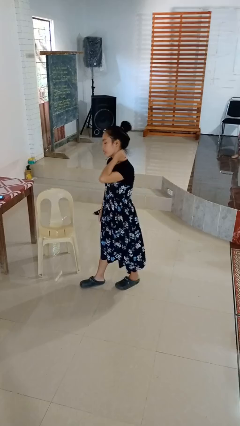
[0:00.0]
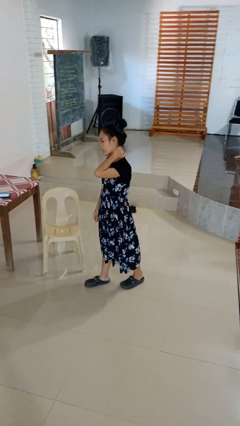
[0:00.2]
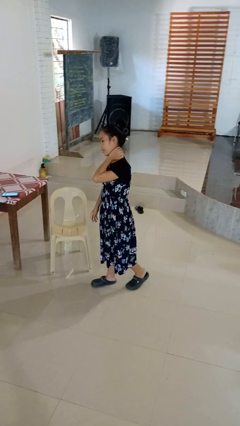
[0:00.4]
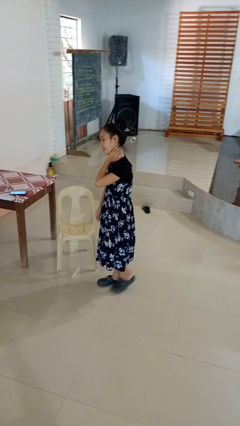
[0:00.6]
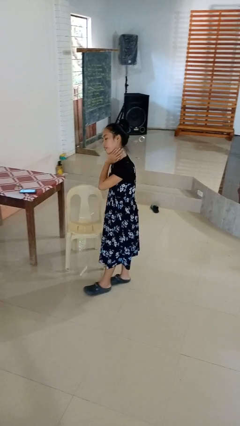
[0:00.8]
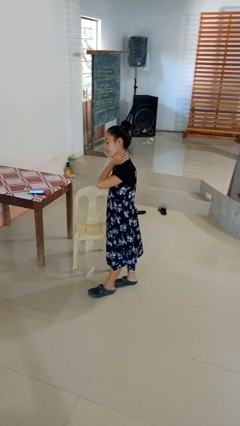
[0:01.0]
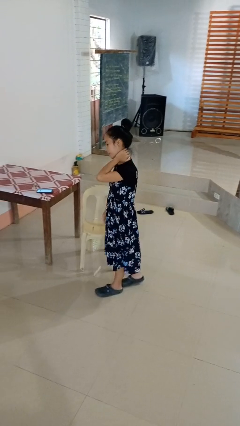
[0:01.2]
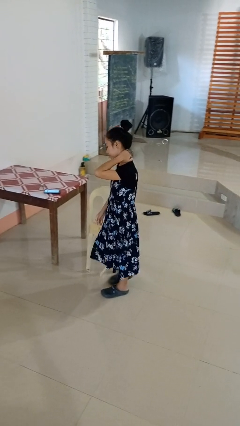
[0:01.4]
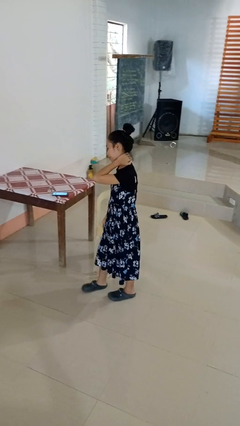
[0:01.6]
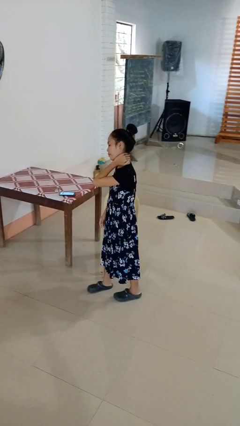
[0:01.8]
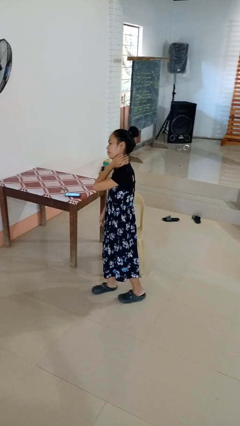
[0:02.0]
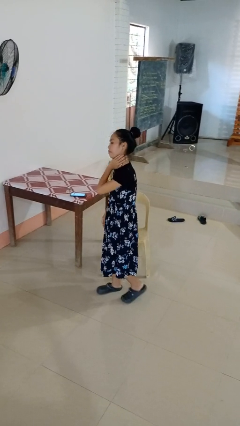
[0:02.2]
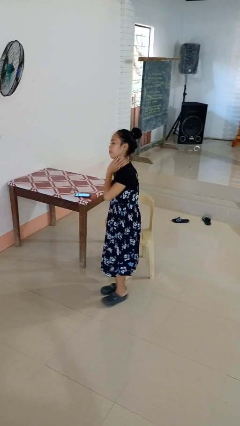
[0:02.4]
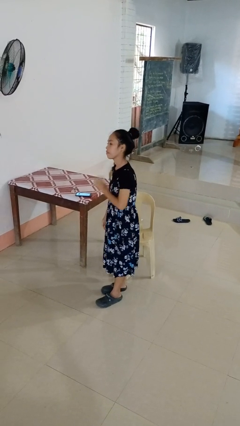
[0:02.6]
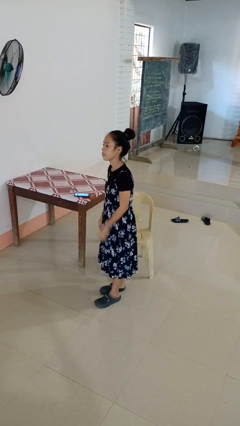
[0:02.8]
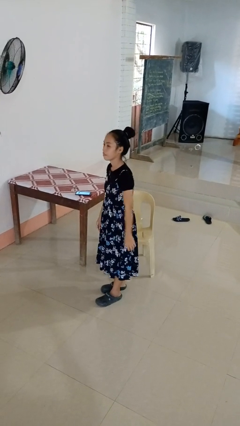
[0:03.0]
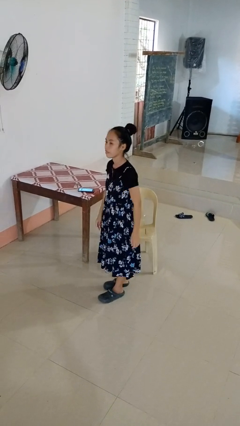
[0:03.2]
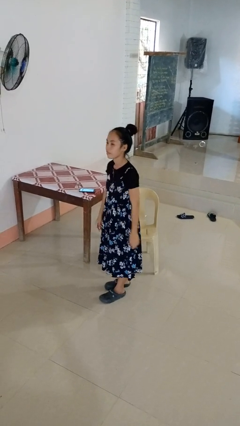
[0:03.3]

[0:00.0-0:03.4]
person rubs neck

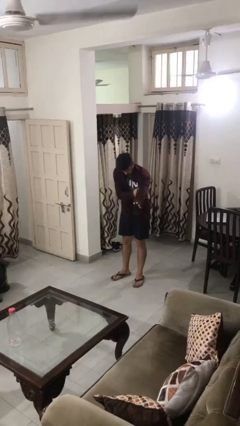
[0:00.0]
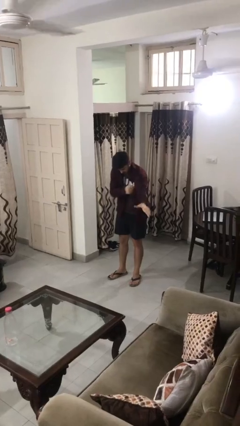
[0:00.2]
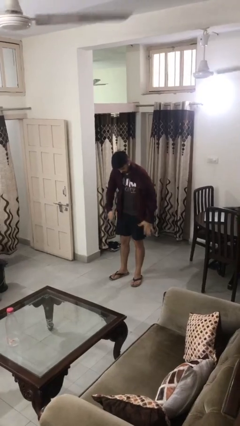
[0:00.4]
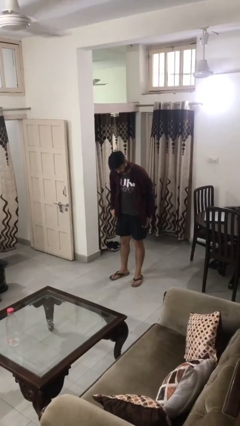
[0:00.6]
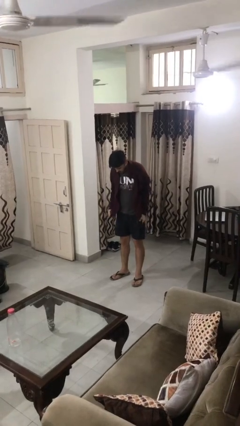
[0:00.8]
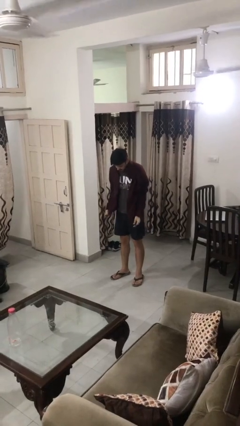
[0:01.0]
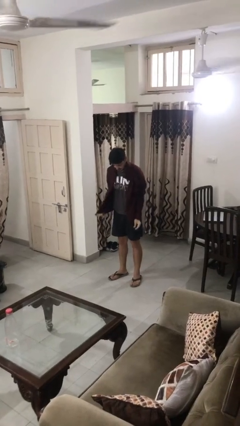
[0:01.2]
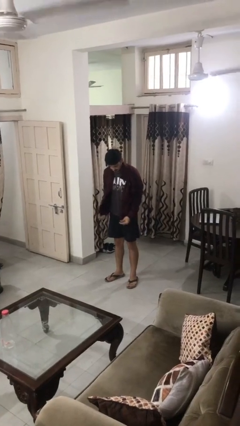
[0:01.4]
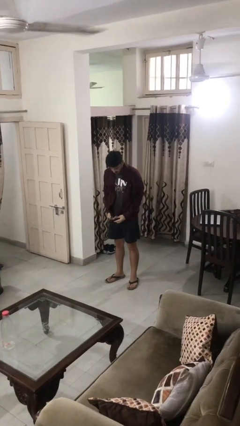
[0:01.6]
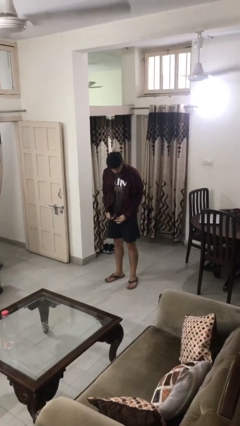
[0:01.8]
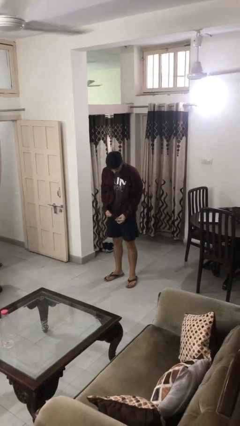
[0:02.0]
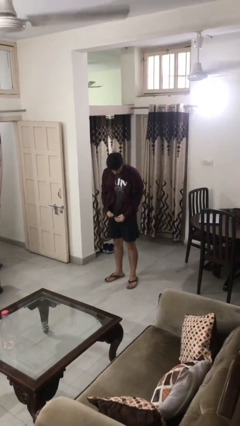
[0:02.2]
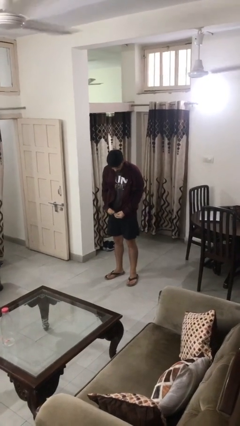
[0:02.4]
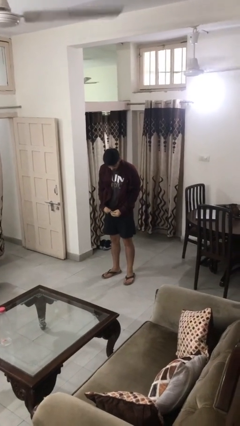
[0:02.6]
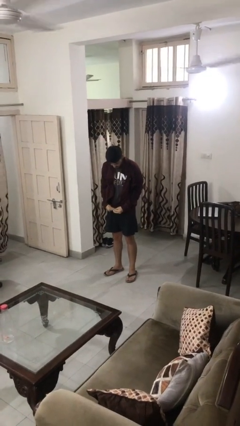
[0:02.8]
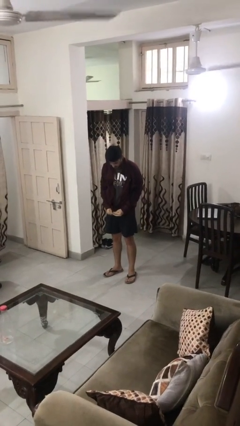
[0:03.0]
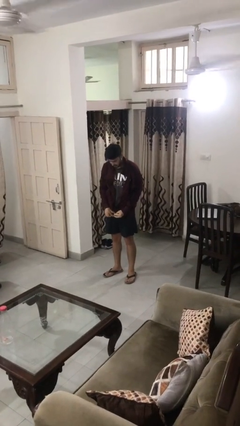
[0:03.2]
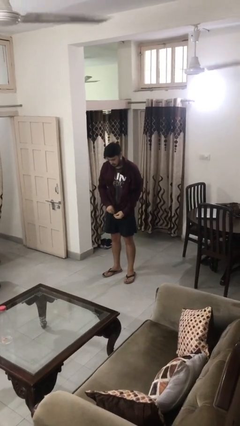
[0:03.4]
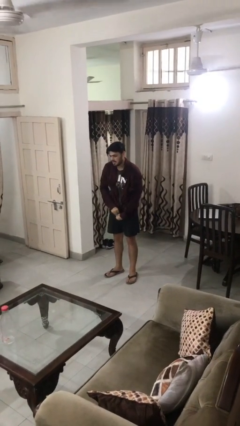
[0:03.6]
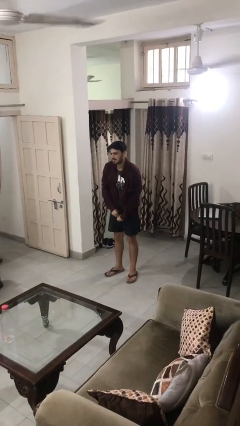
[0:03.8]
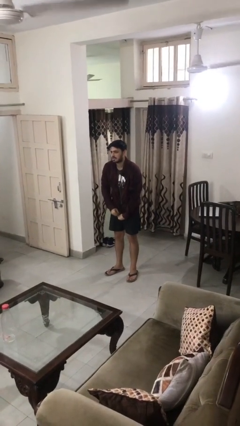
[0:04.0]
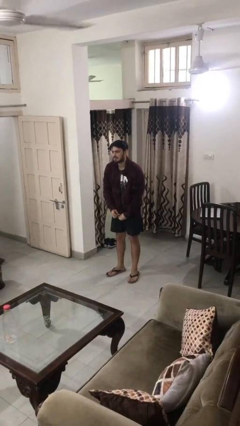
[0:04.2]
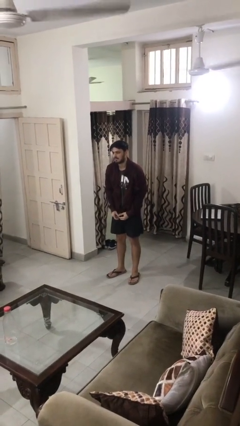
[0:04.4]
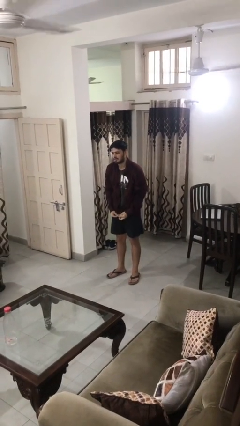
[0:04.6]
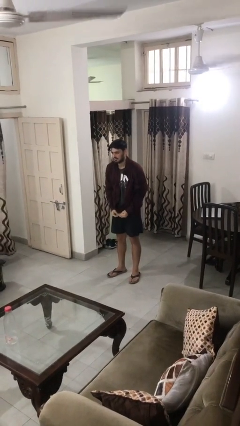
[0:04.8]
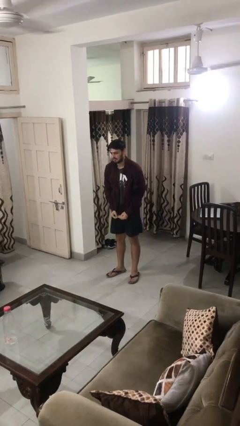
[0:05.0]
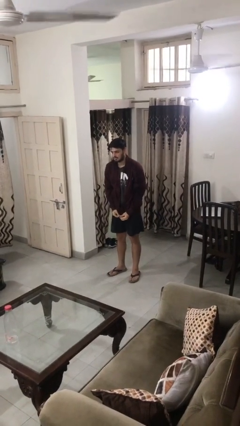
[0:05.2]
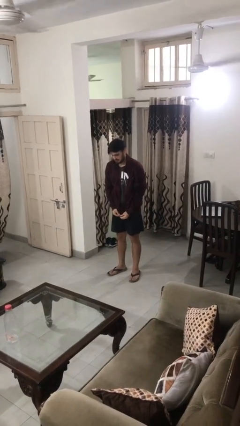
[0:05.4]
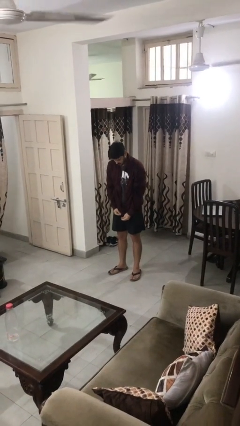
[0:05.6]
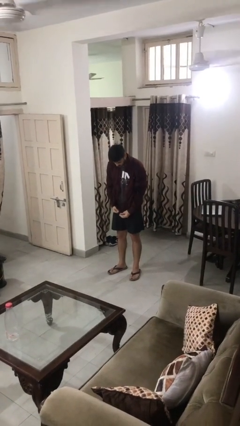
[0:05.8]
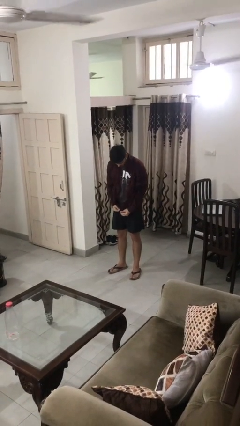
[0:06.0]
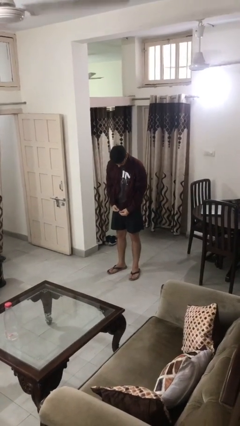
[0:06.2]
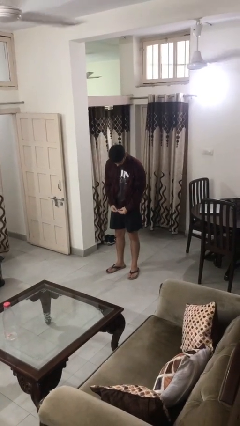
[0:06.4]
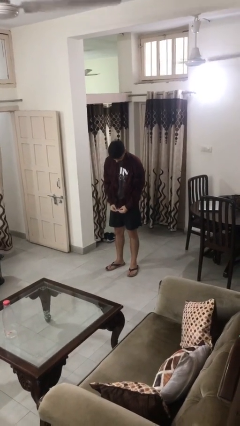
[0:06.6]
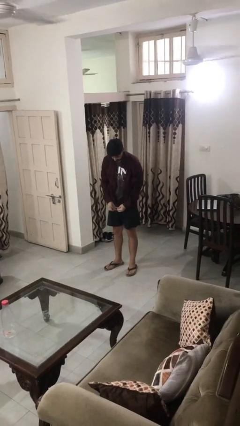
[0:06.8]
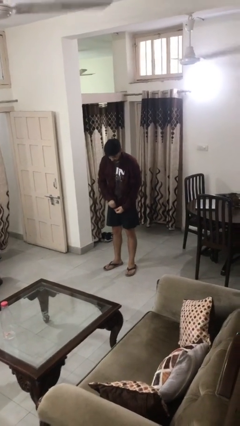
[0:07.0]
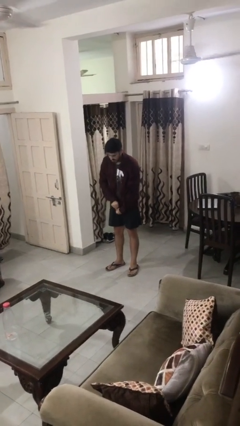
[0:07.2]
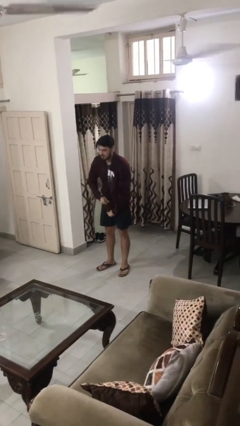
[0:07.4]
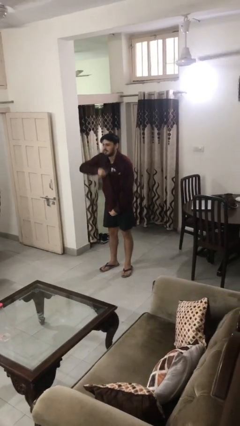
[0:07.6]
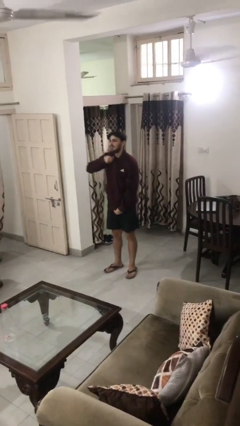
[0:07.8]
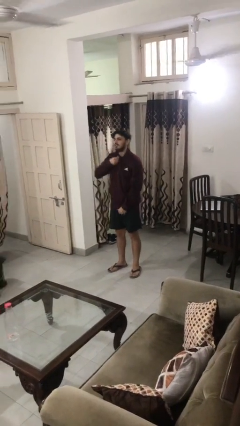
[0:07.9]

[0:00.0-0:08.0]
person zips up jacket

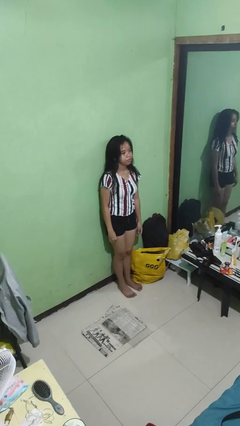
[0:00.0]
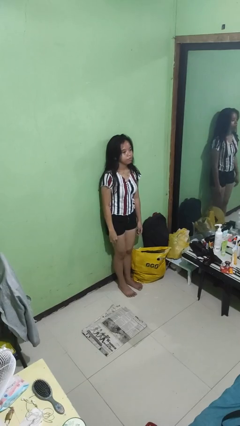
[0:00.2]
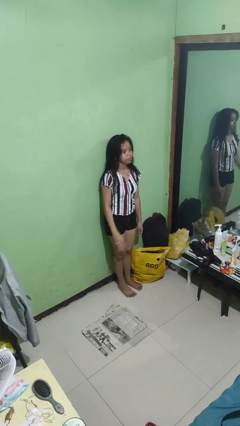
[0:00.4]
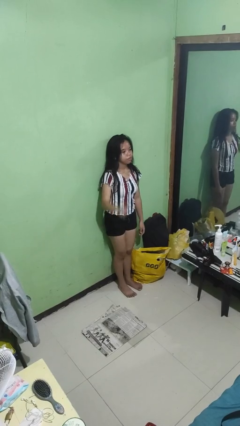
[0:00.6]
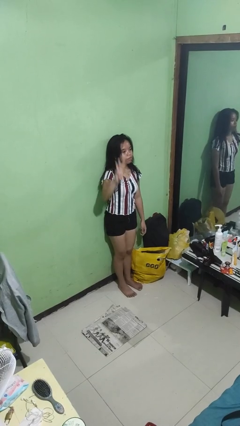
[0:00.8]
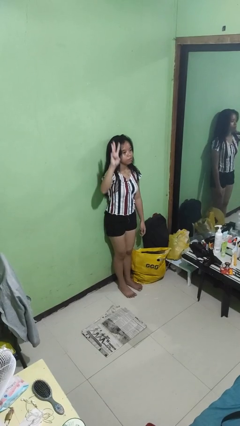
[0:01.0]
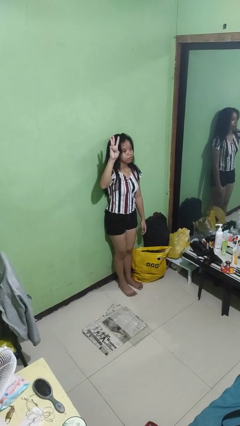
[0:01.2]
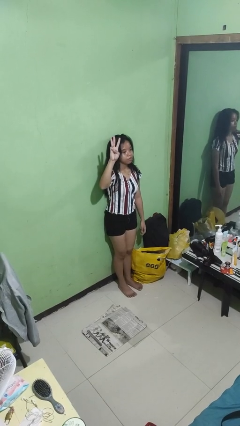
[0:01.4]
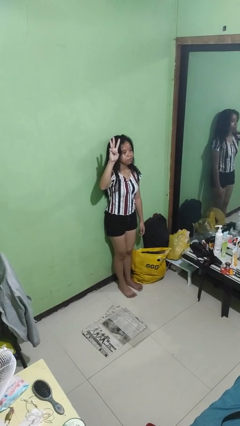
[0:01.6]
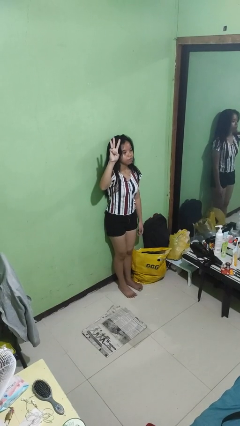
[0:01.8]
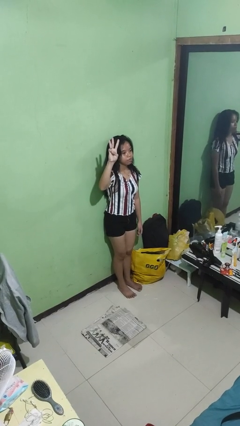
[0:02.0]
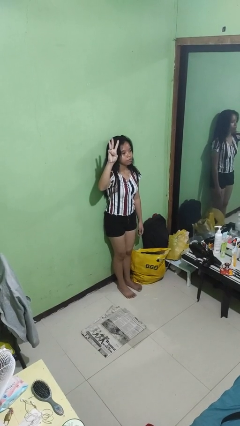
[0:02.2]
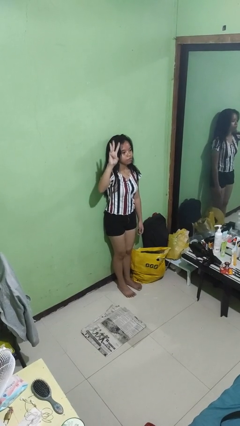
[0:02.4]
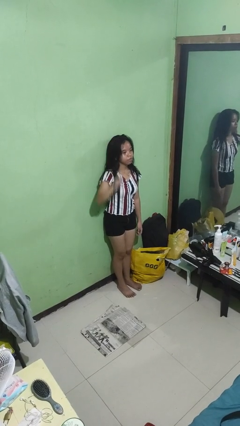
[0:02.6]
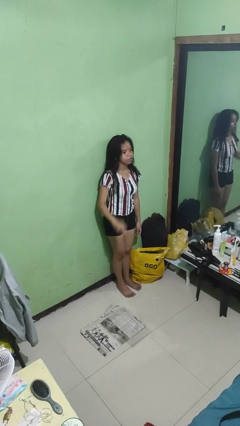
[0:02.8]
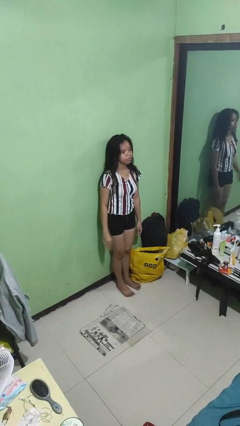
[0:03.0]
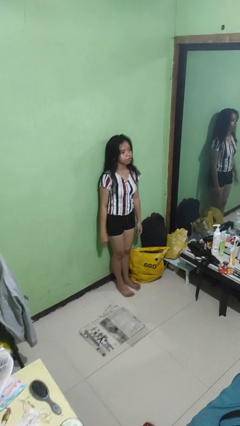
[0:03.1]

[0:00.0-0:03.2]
person gestures number three

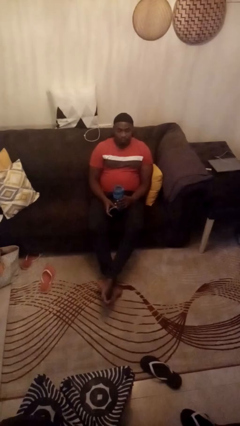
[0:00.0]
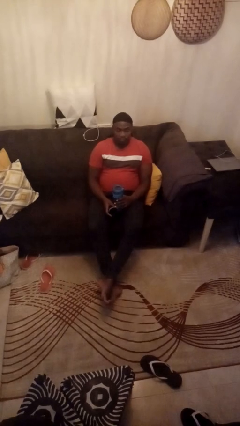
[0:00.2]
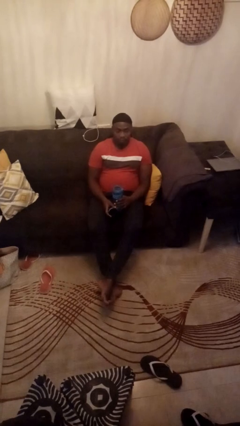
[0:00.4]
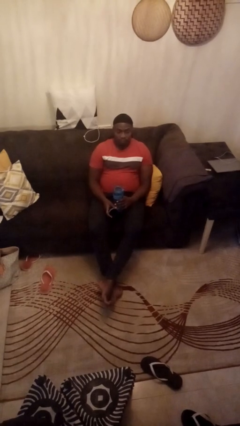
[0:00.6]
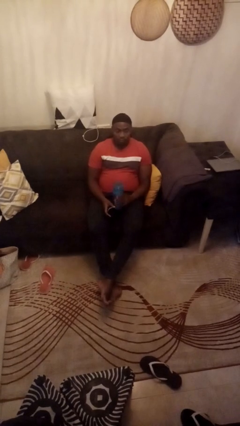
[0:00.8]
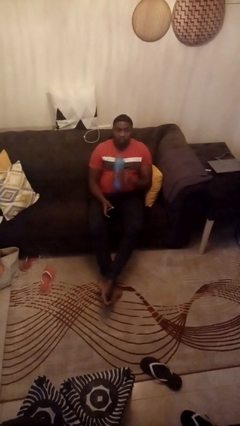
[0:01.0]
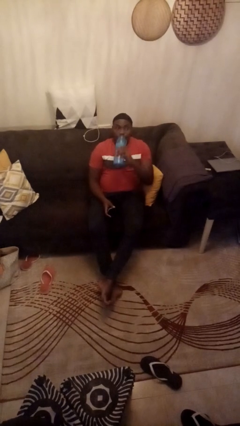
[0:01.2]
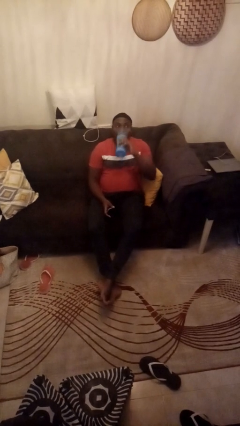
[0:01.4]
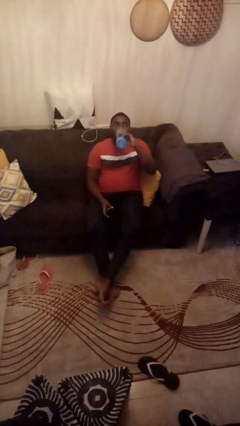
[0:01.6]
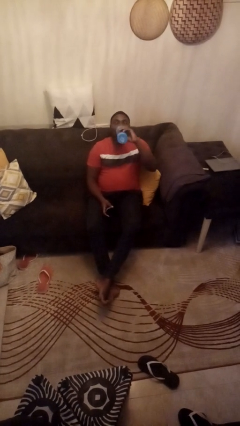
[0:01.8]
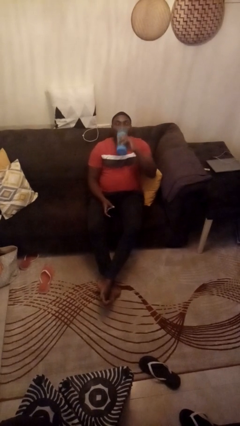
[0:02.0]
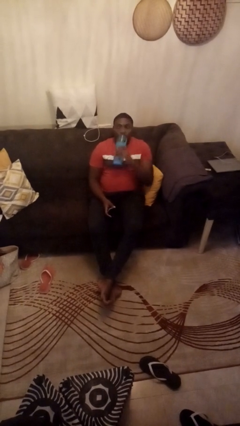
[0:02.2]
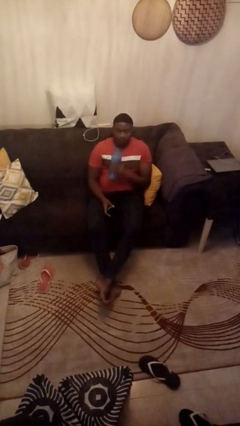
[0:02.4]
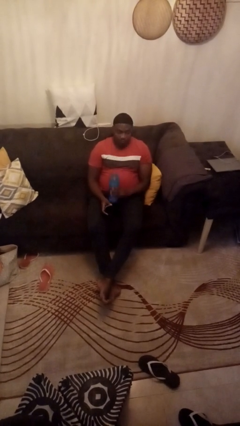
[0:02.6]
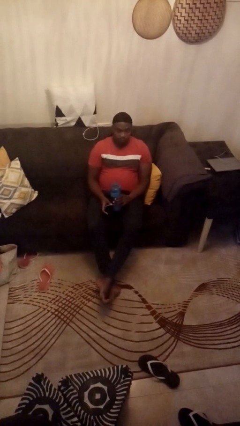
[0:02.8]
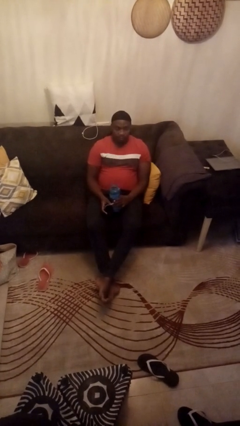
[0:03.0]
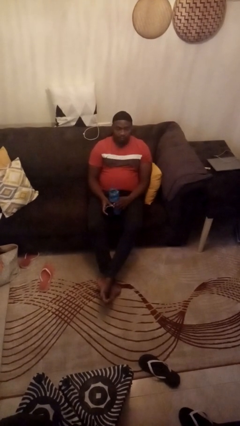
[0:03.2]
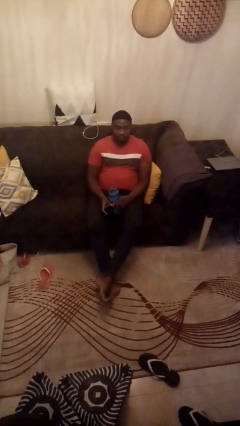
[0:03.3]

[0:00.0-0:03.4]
person drinks from bottle
